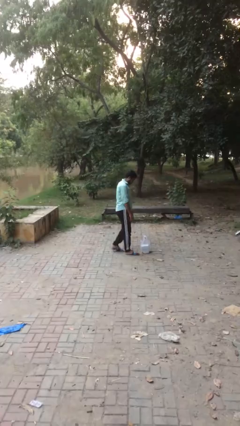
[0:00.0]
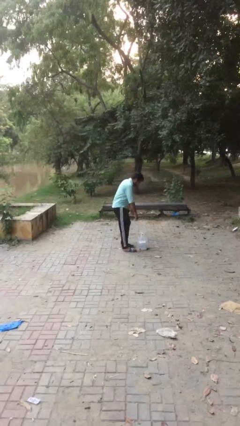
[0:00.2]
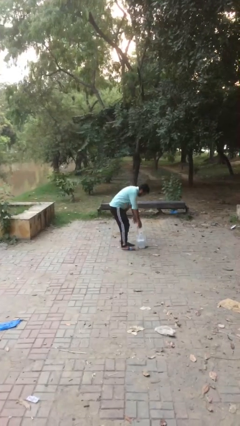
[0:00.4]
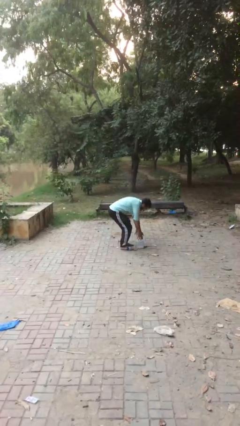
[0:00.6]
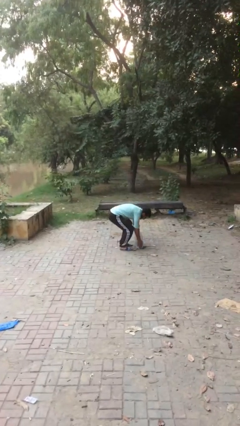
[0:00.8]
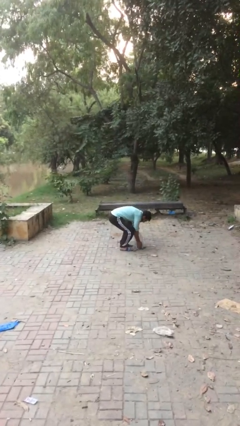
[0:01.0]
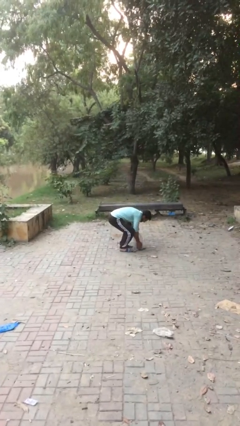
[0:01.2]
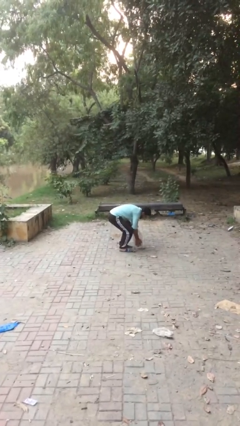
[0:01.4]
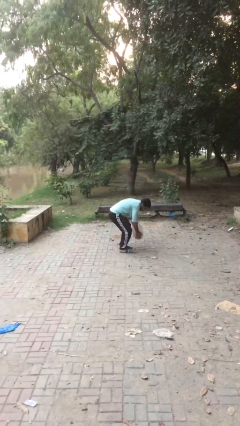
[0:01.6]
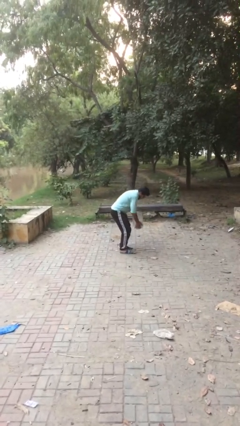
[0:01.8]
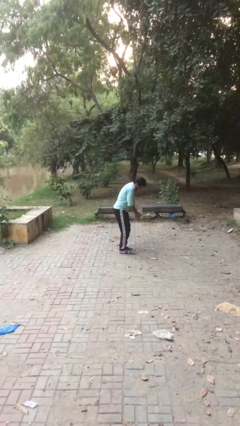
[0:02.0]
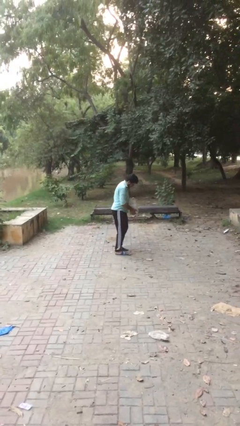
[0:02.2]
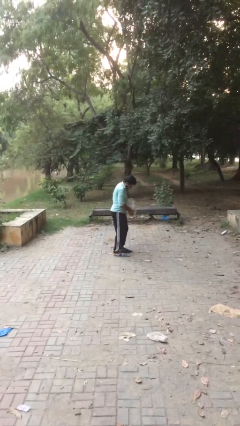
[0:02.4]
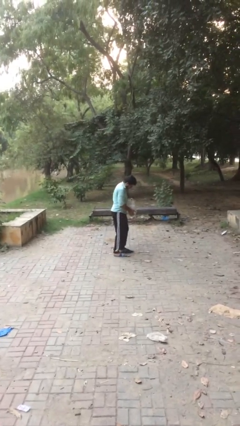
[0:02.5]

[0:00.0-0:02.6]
person picks up object from floor

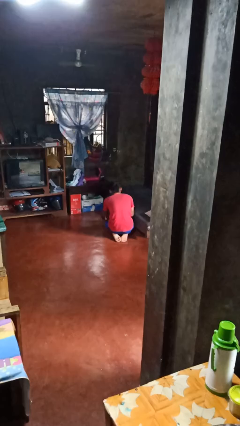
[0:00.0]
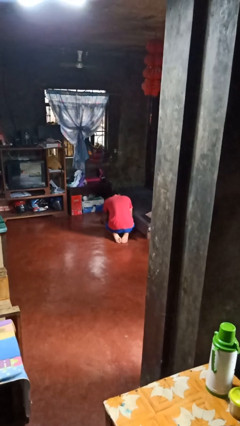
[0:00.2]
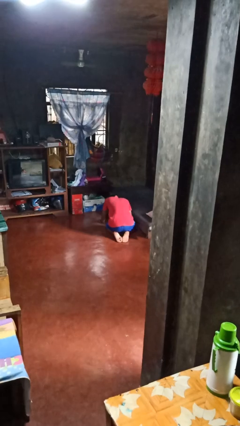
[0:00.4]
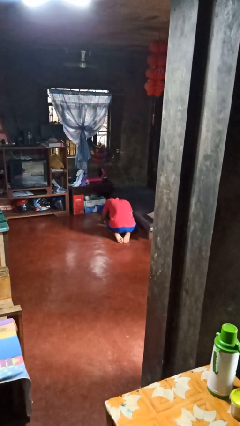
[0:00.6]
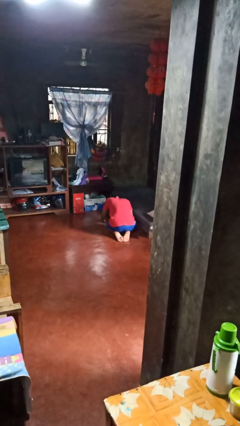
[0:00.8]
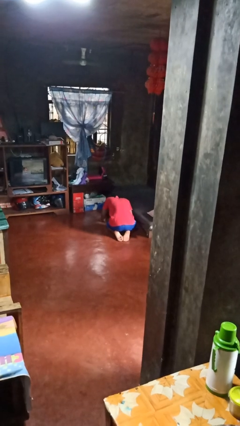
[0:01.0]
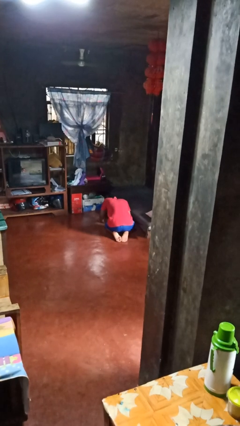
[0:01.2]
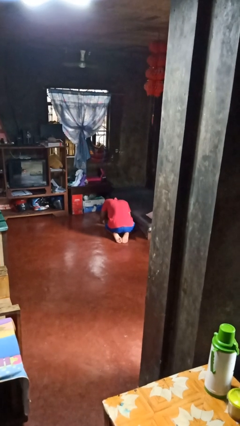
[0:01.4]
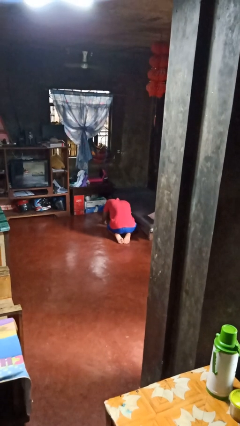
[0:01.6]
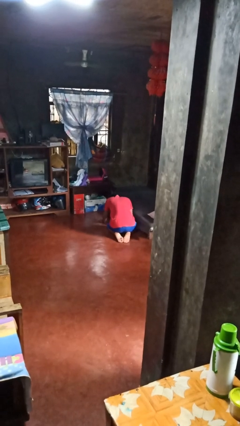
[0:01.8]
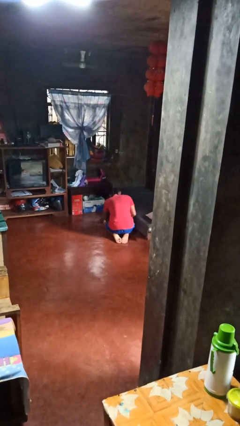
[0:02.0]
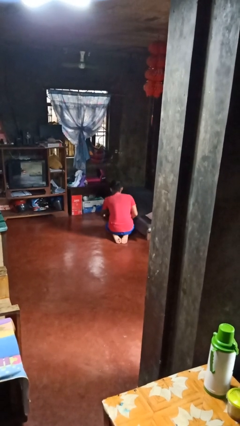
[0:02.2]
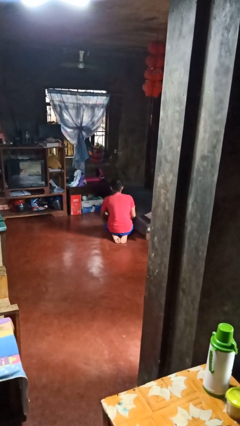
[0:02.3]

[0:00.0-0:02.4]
person searches under bed

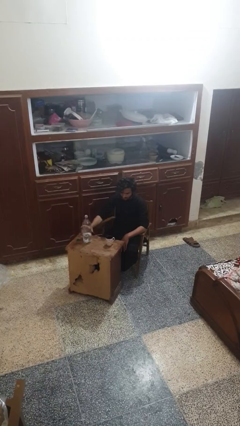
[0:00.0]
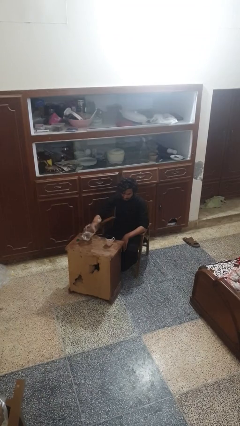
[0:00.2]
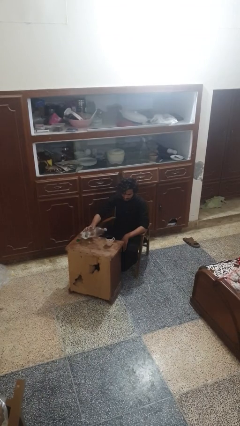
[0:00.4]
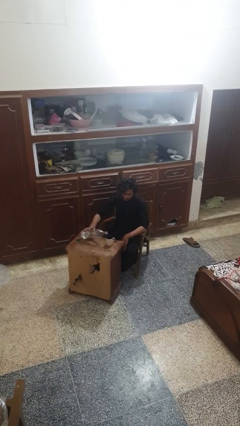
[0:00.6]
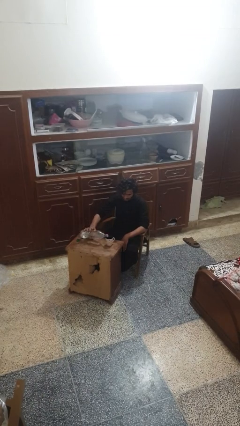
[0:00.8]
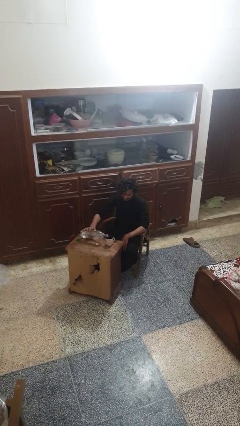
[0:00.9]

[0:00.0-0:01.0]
person pours liquid into cup

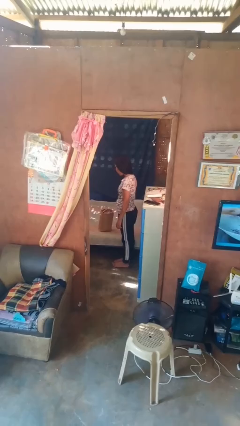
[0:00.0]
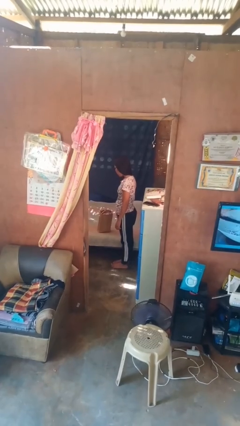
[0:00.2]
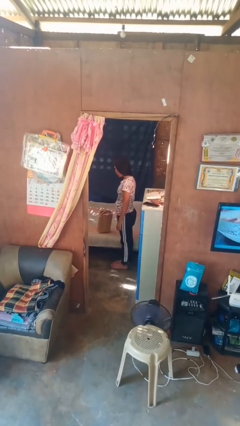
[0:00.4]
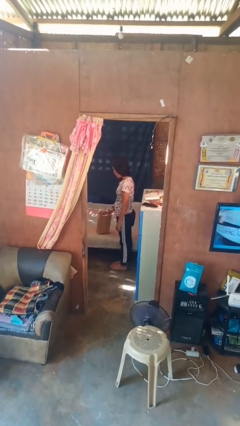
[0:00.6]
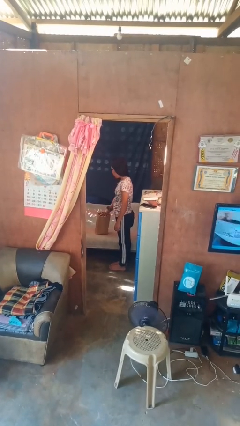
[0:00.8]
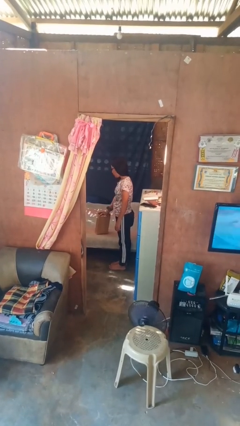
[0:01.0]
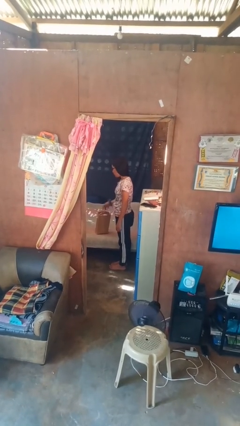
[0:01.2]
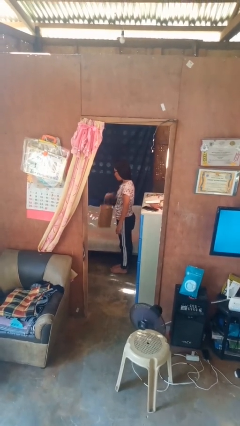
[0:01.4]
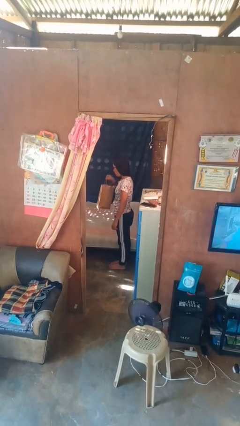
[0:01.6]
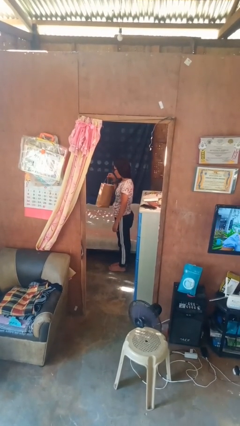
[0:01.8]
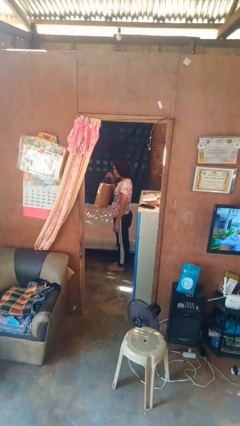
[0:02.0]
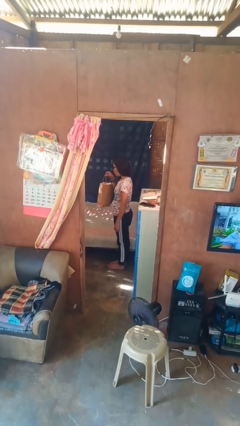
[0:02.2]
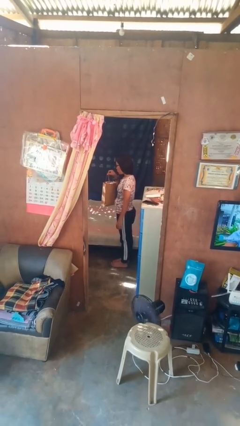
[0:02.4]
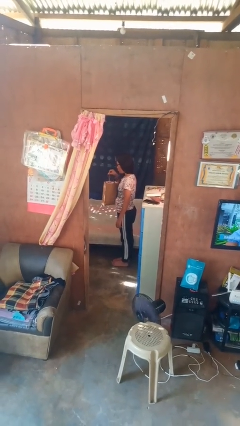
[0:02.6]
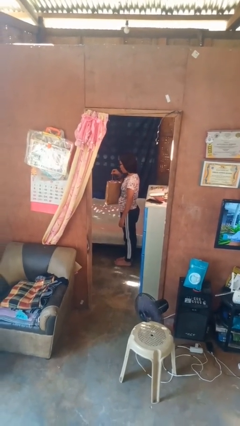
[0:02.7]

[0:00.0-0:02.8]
person picks up object from bed

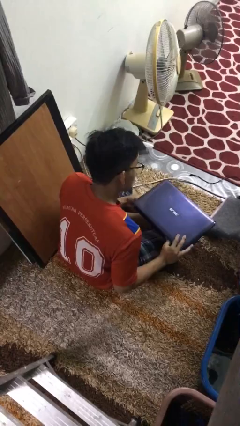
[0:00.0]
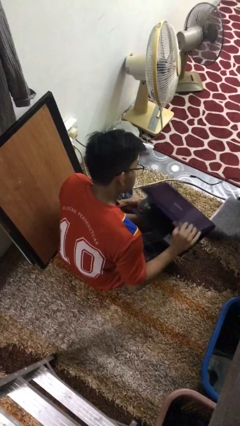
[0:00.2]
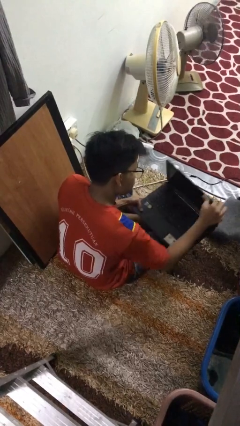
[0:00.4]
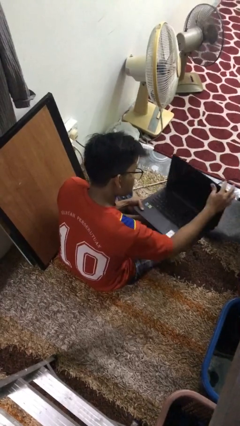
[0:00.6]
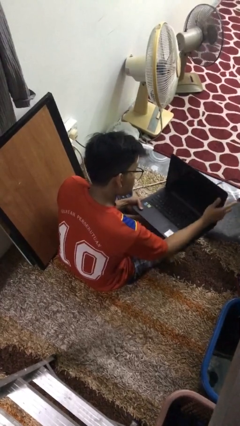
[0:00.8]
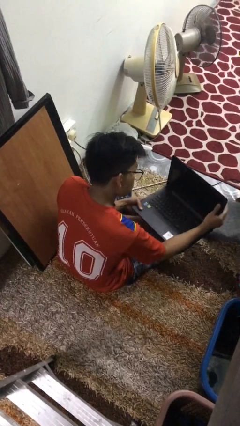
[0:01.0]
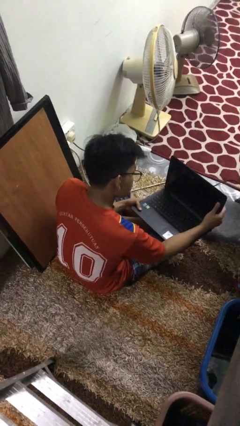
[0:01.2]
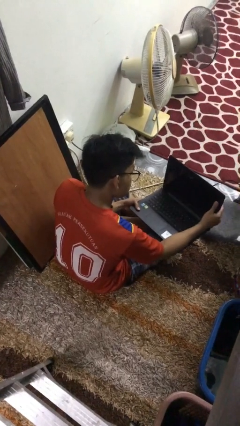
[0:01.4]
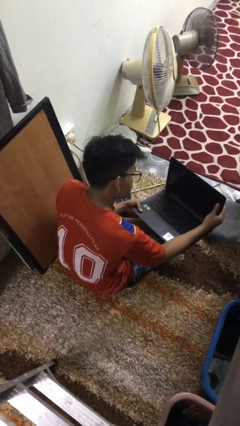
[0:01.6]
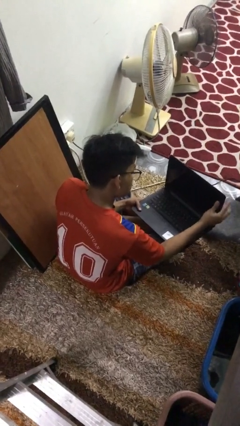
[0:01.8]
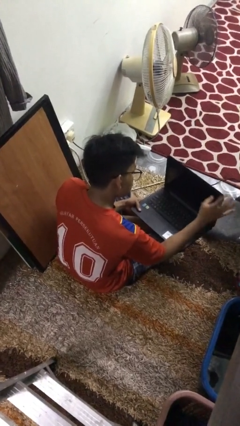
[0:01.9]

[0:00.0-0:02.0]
person opens laptop

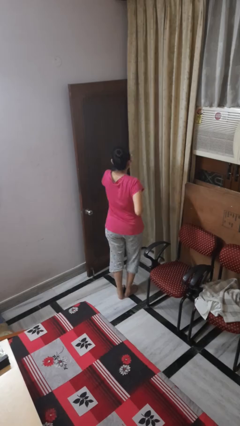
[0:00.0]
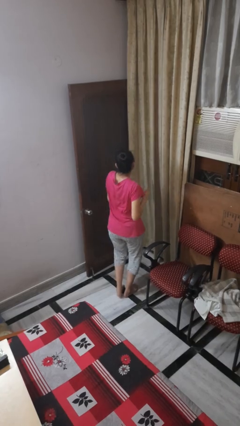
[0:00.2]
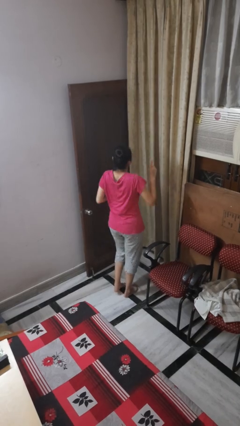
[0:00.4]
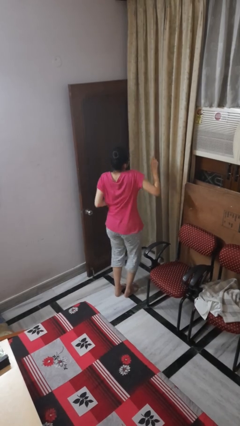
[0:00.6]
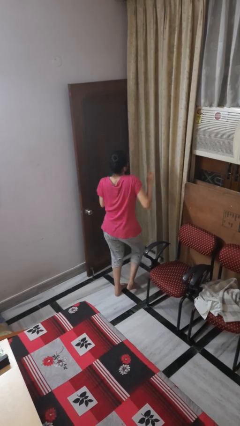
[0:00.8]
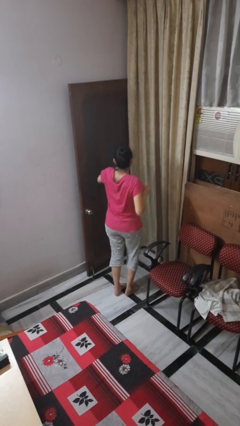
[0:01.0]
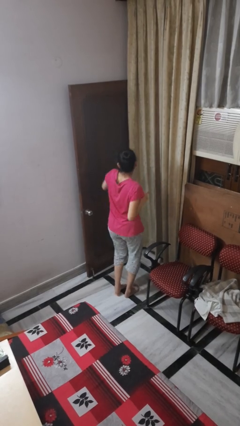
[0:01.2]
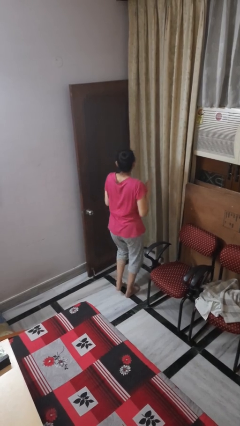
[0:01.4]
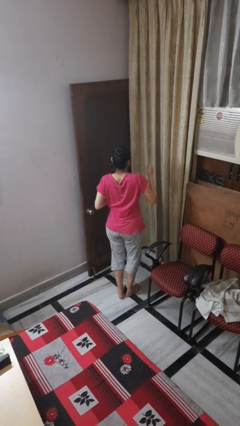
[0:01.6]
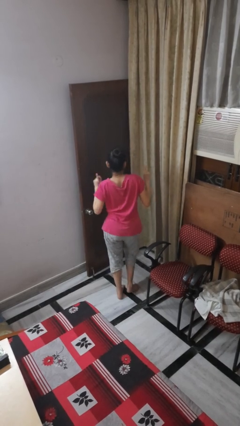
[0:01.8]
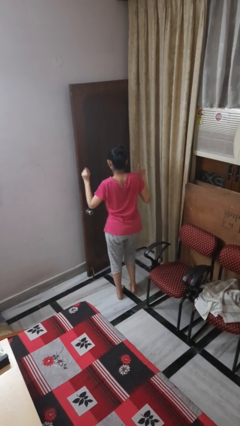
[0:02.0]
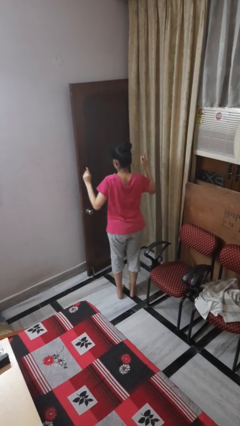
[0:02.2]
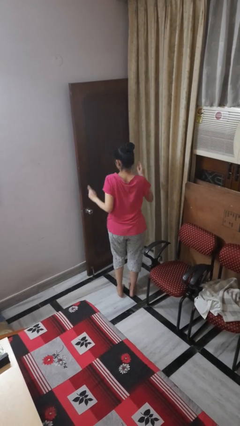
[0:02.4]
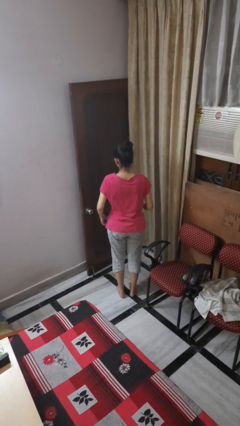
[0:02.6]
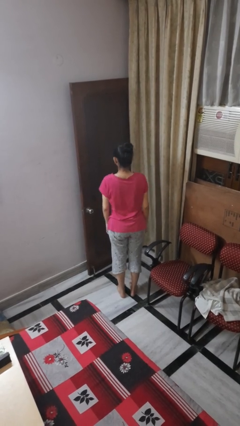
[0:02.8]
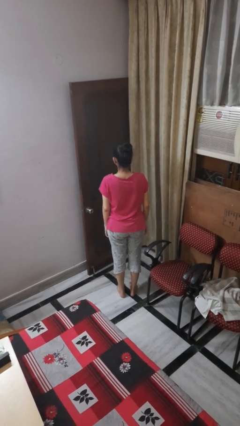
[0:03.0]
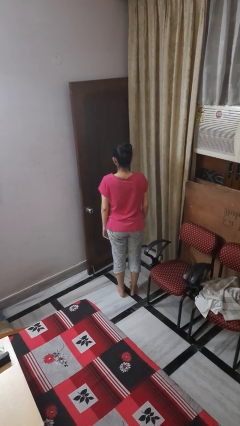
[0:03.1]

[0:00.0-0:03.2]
person dances in place

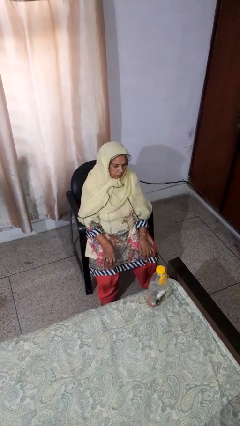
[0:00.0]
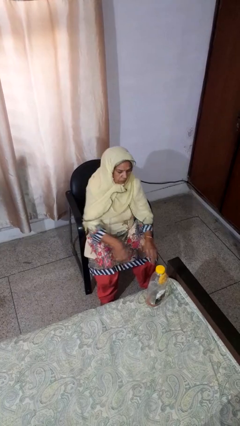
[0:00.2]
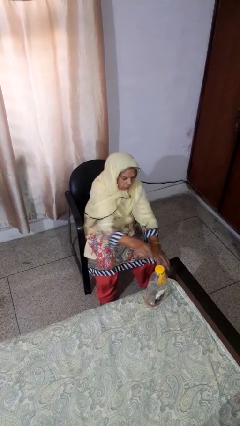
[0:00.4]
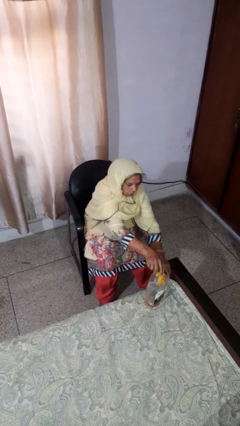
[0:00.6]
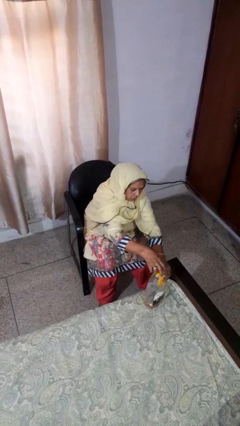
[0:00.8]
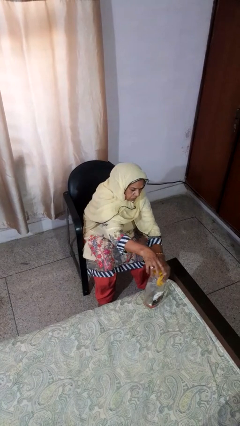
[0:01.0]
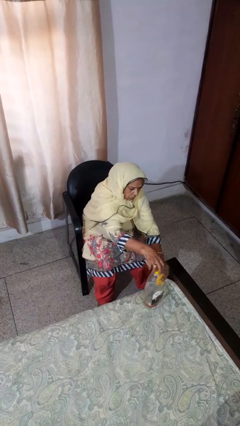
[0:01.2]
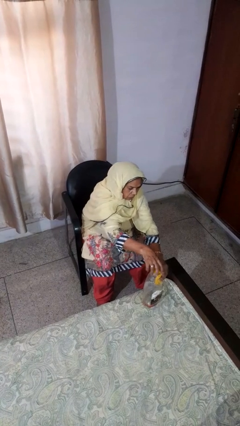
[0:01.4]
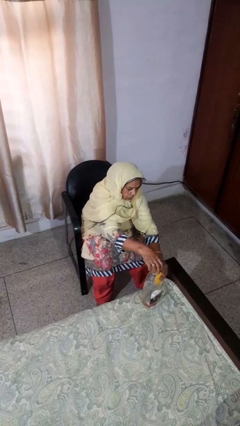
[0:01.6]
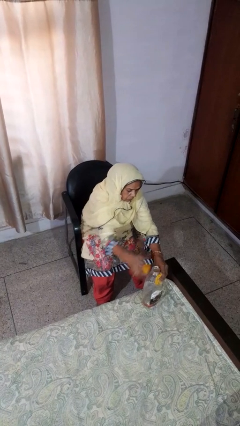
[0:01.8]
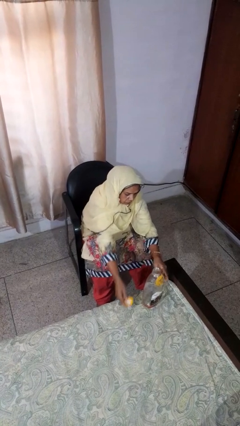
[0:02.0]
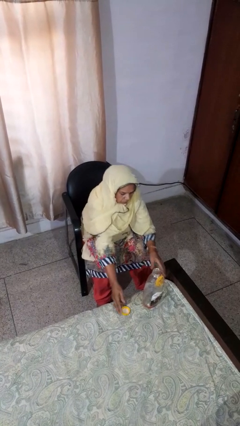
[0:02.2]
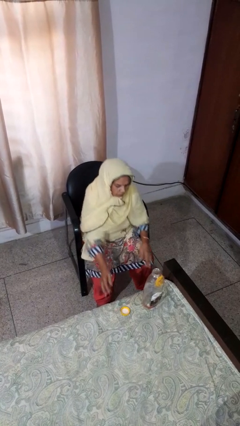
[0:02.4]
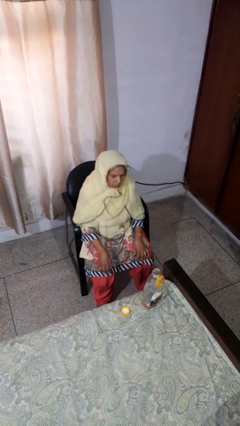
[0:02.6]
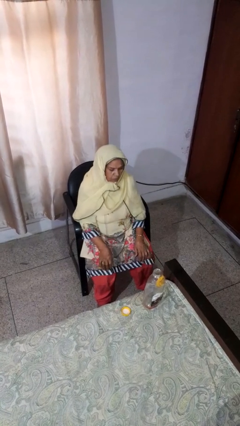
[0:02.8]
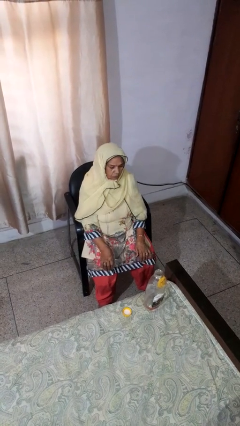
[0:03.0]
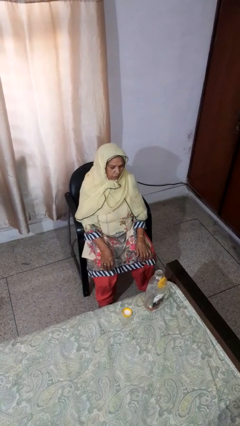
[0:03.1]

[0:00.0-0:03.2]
person unscrews lid from bottle
